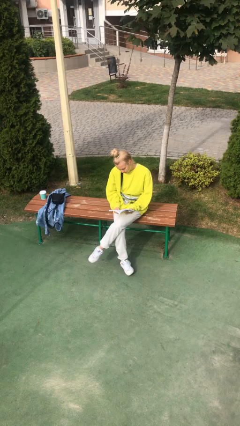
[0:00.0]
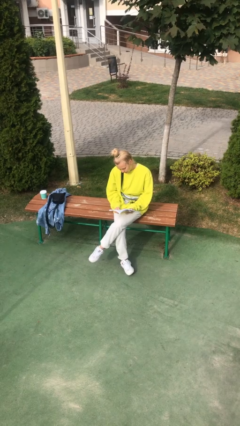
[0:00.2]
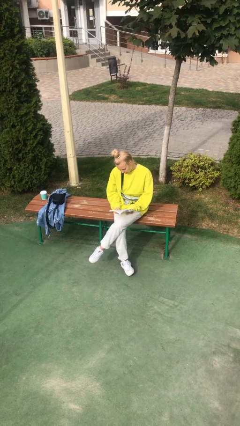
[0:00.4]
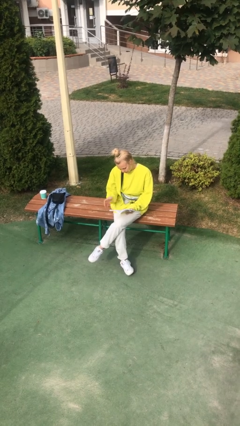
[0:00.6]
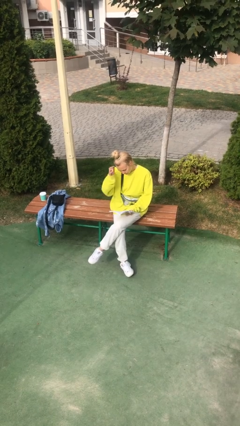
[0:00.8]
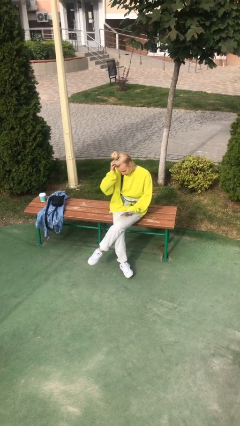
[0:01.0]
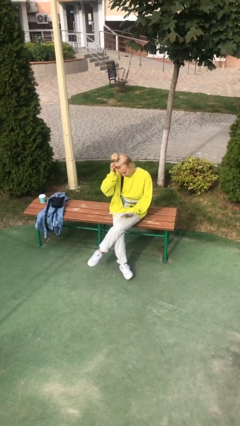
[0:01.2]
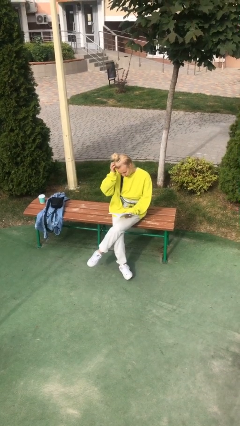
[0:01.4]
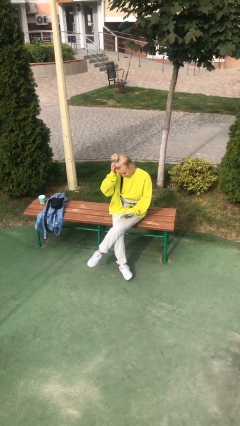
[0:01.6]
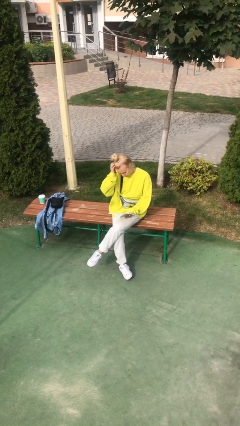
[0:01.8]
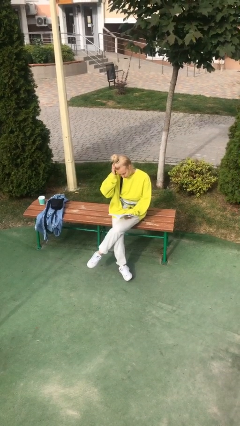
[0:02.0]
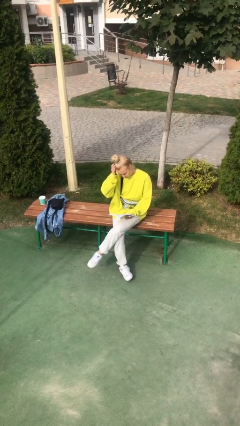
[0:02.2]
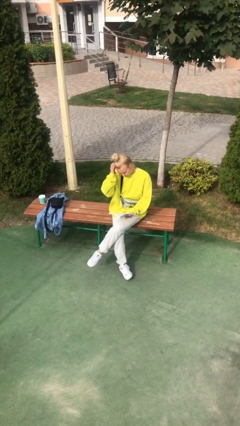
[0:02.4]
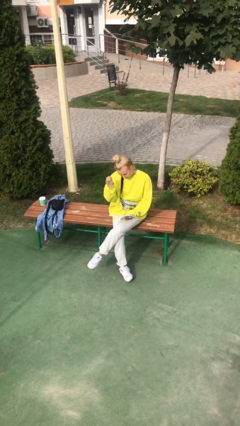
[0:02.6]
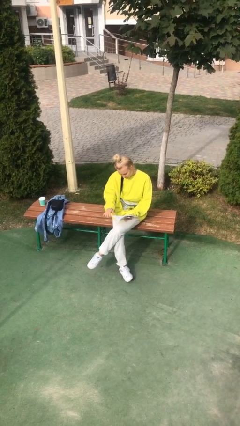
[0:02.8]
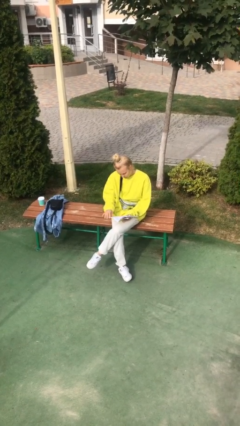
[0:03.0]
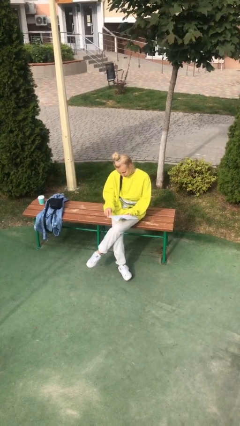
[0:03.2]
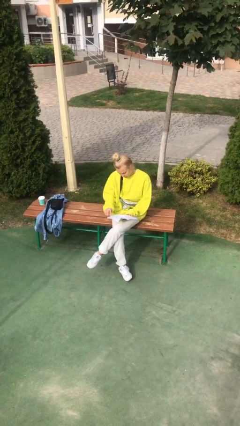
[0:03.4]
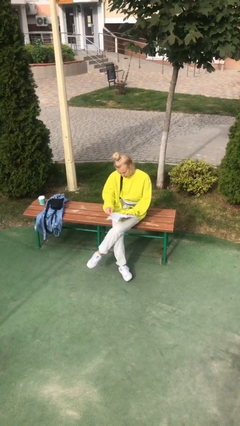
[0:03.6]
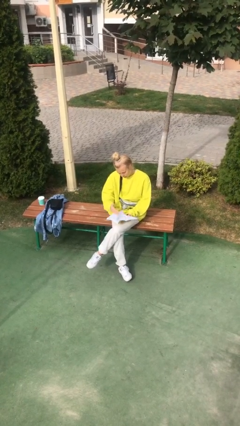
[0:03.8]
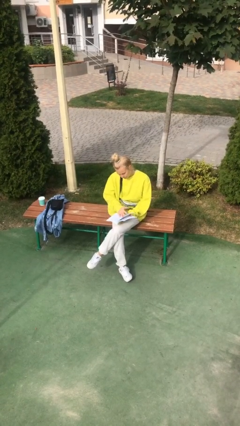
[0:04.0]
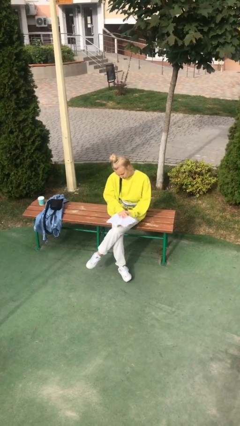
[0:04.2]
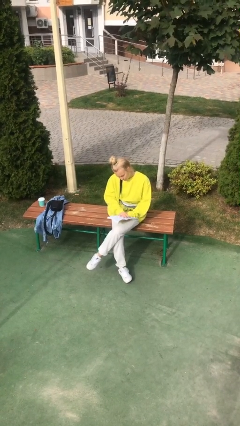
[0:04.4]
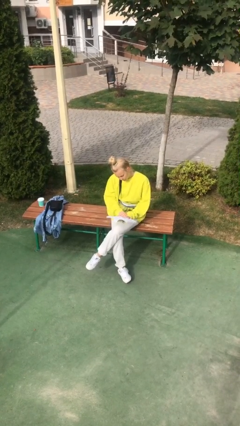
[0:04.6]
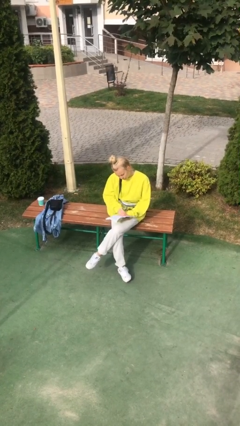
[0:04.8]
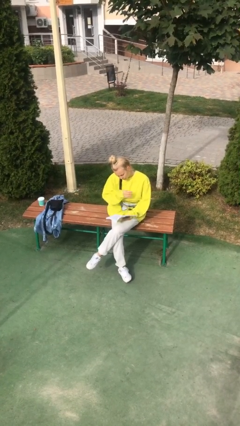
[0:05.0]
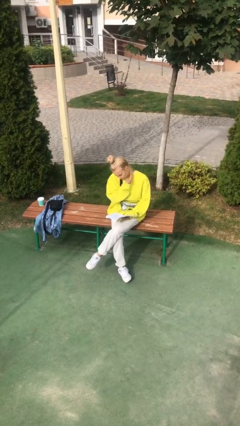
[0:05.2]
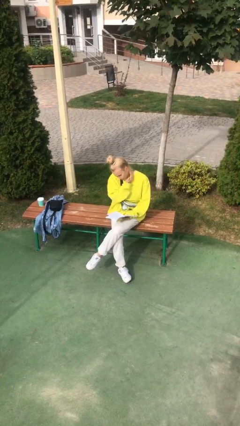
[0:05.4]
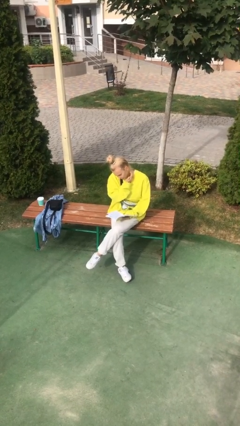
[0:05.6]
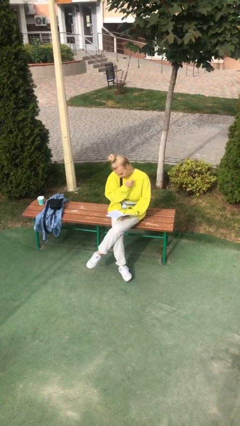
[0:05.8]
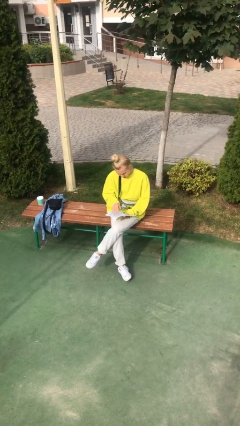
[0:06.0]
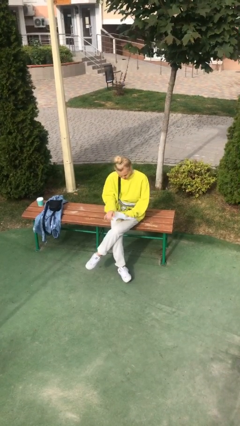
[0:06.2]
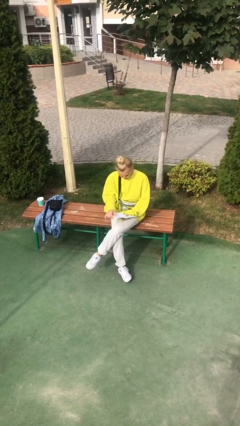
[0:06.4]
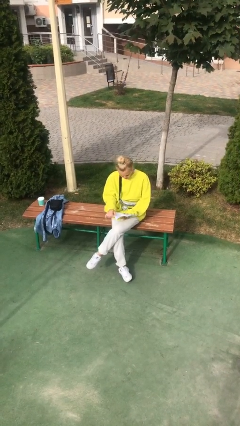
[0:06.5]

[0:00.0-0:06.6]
person reads document

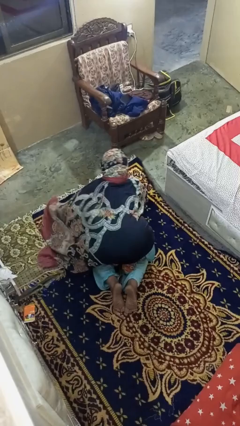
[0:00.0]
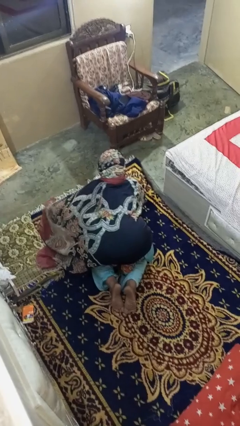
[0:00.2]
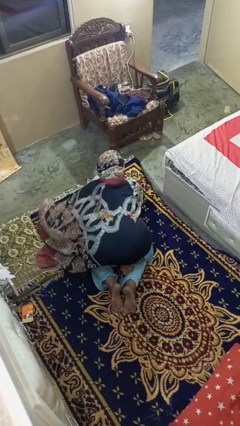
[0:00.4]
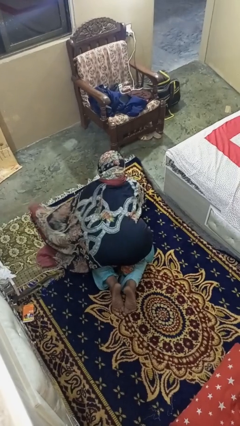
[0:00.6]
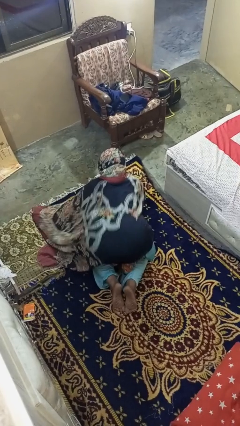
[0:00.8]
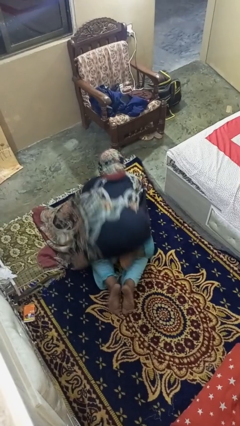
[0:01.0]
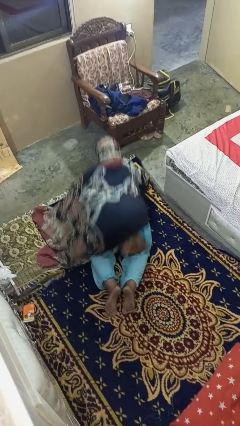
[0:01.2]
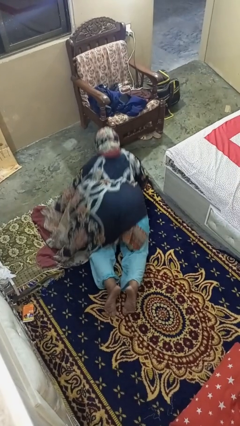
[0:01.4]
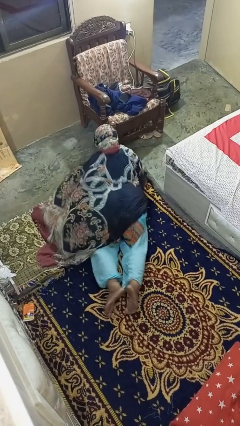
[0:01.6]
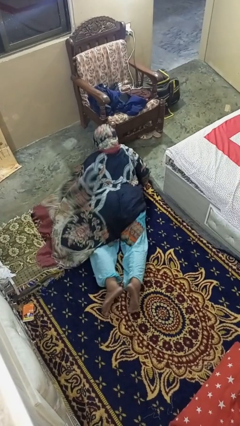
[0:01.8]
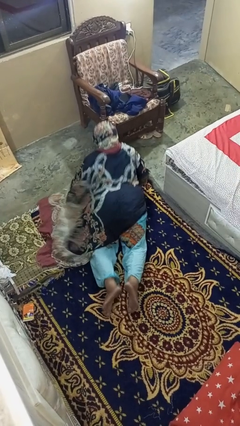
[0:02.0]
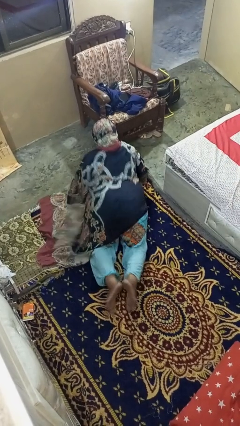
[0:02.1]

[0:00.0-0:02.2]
person exercises with pushup

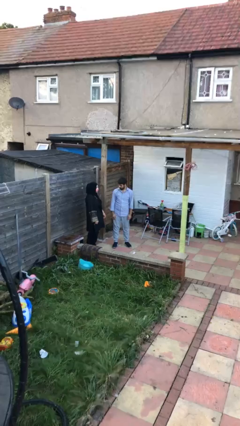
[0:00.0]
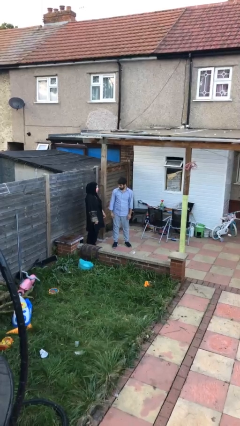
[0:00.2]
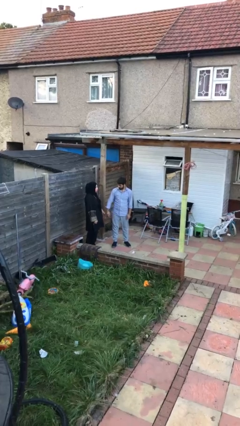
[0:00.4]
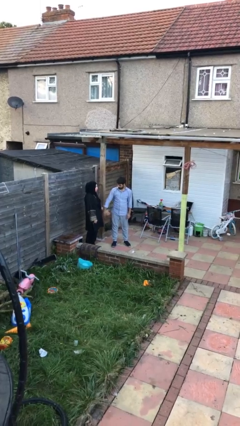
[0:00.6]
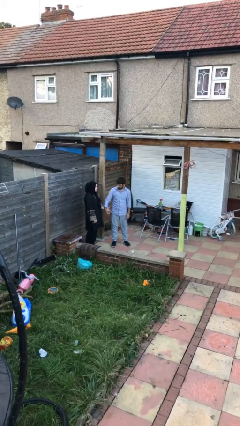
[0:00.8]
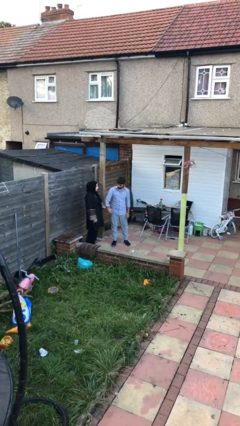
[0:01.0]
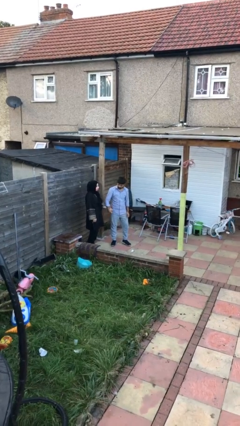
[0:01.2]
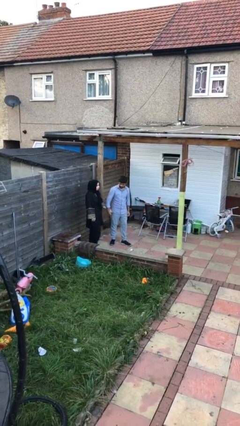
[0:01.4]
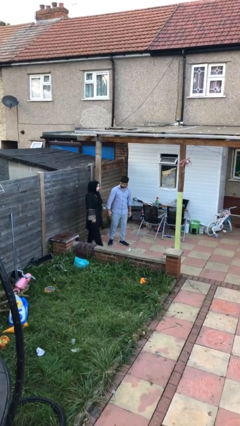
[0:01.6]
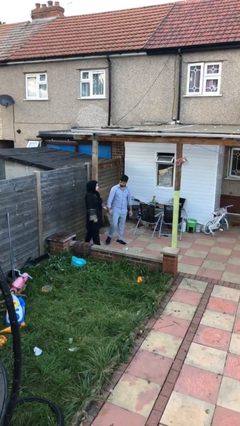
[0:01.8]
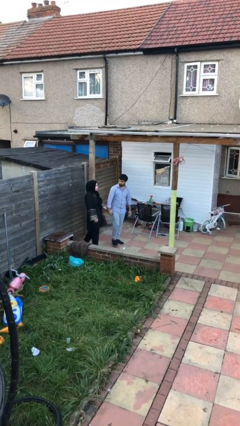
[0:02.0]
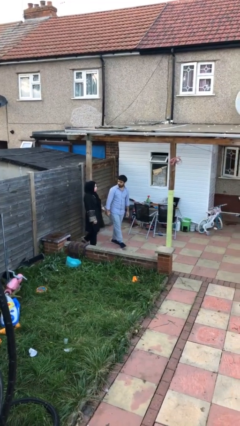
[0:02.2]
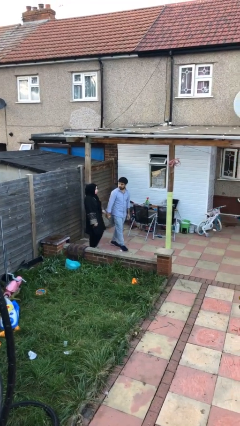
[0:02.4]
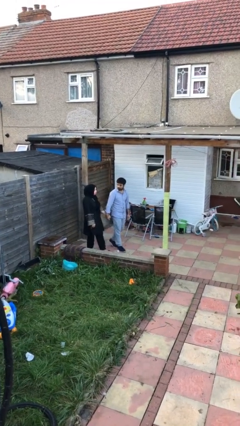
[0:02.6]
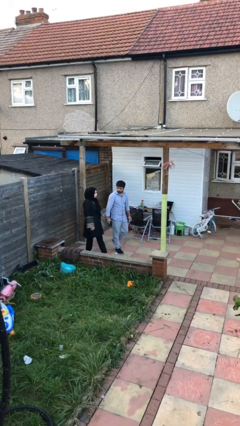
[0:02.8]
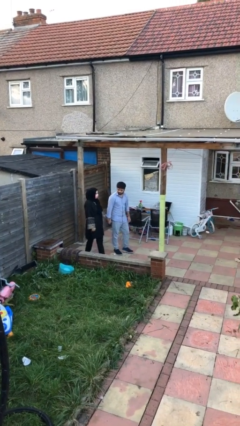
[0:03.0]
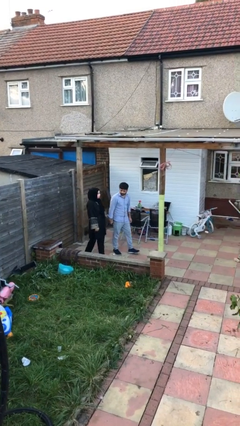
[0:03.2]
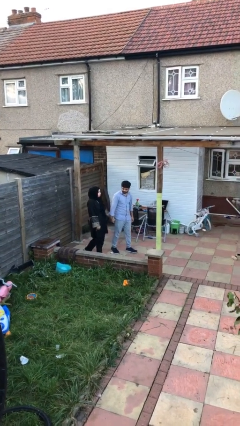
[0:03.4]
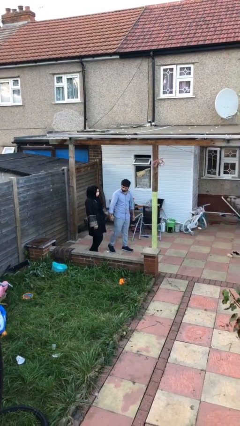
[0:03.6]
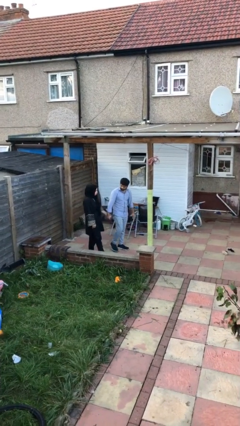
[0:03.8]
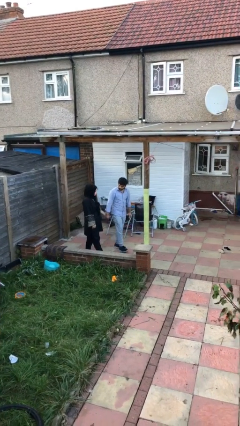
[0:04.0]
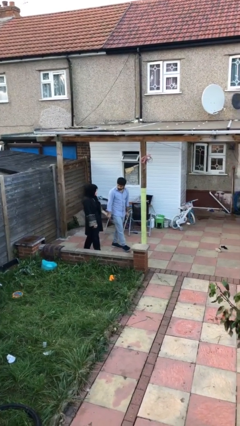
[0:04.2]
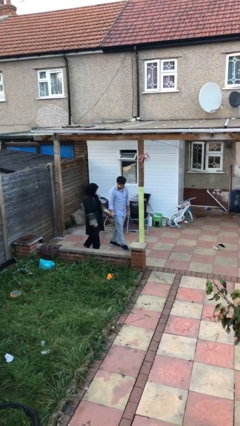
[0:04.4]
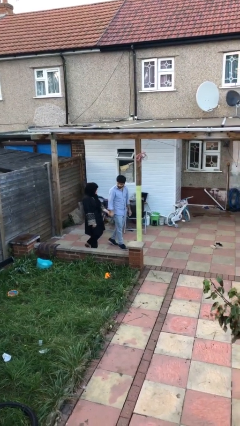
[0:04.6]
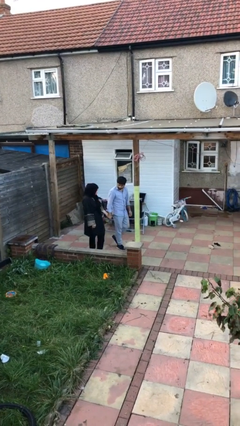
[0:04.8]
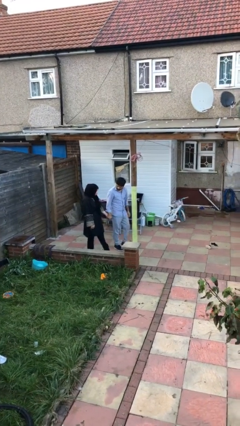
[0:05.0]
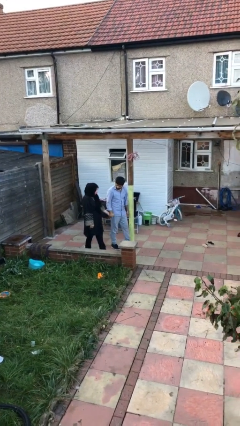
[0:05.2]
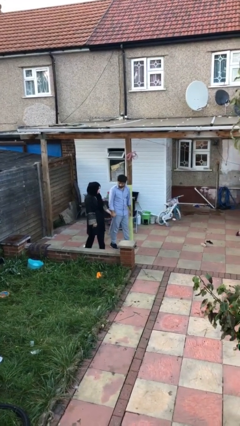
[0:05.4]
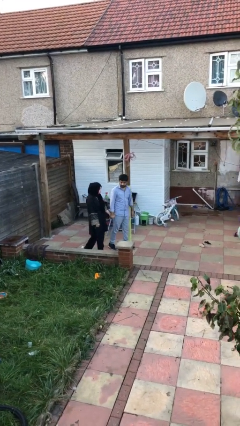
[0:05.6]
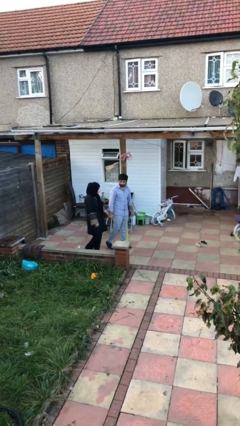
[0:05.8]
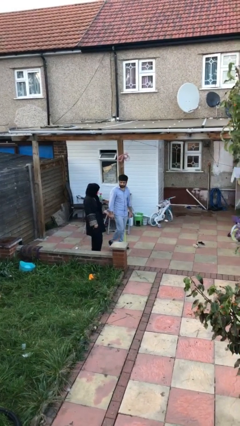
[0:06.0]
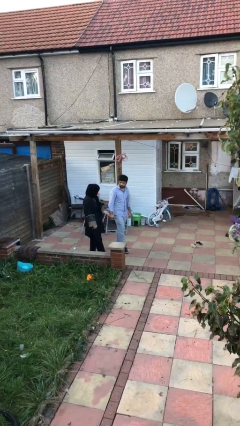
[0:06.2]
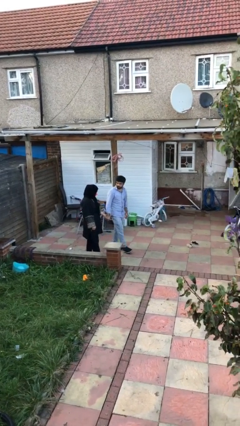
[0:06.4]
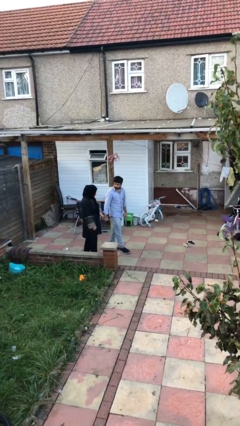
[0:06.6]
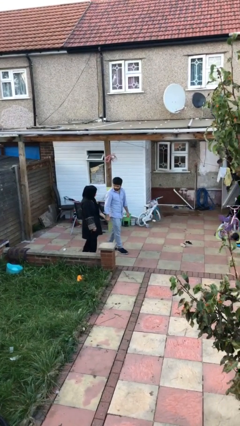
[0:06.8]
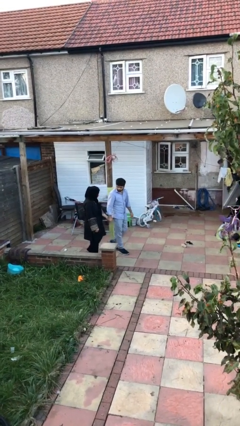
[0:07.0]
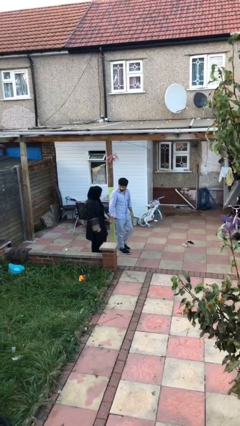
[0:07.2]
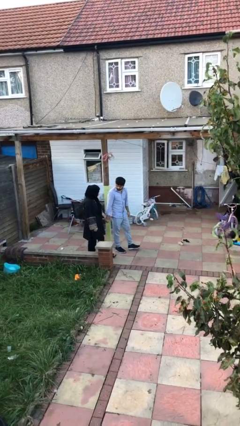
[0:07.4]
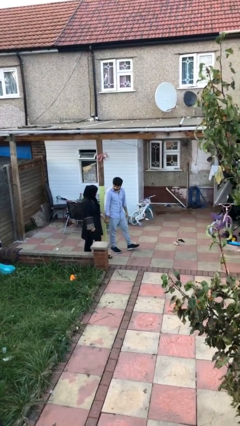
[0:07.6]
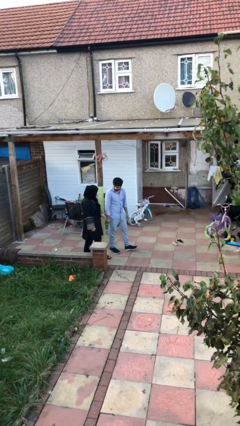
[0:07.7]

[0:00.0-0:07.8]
person holds hand

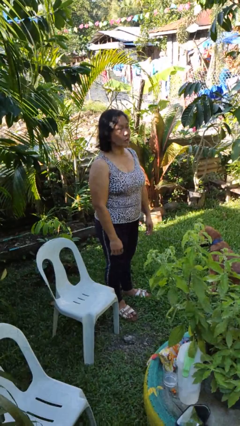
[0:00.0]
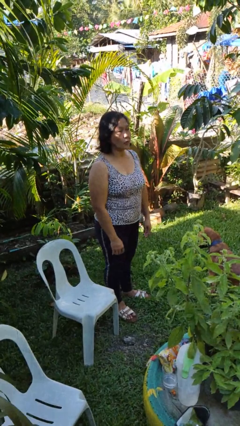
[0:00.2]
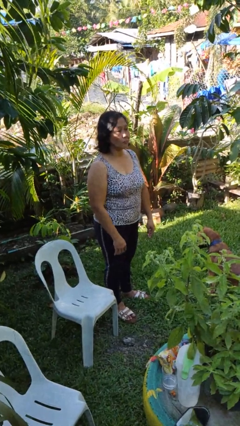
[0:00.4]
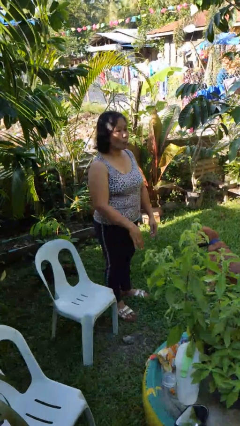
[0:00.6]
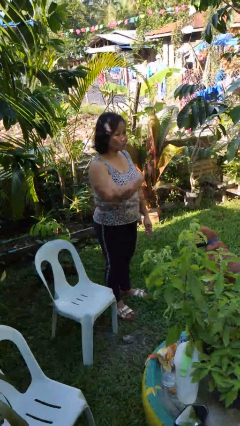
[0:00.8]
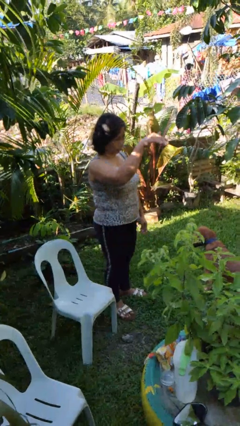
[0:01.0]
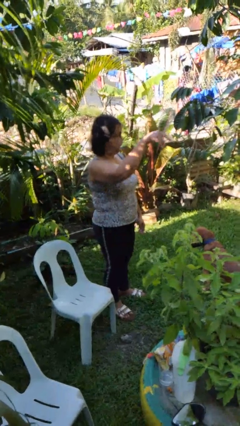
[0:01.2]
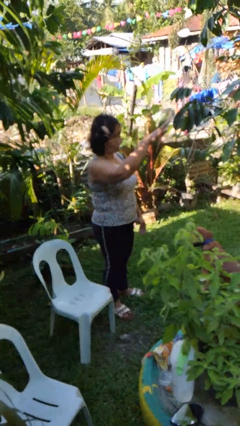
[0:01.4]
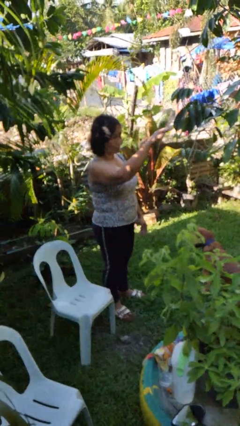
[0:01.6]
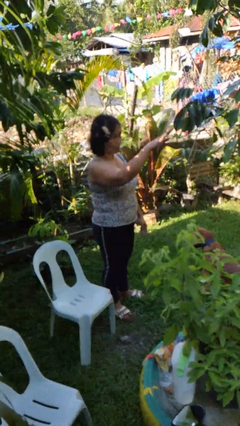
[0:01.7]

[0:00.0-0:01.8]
person gestures come here
